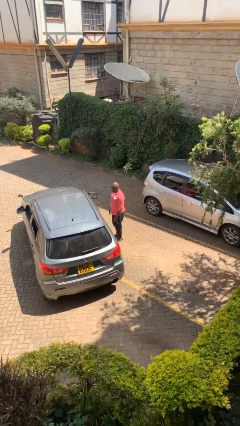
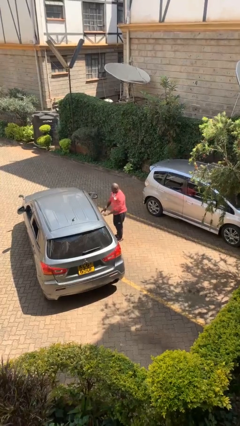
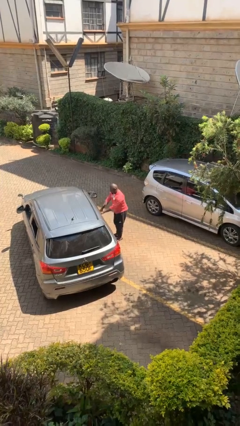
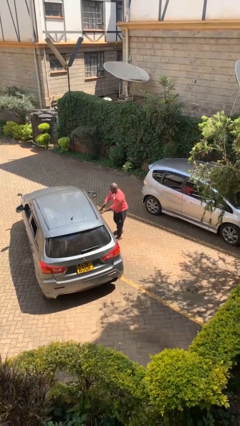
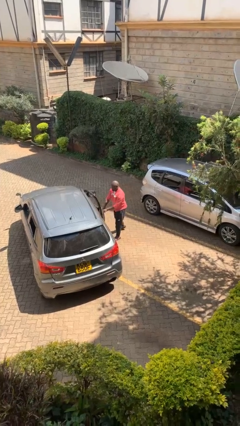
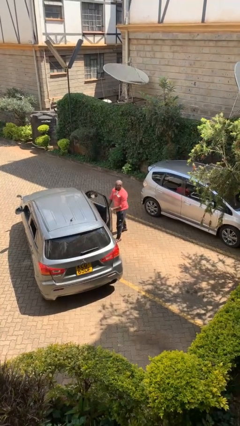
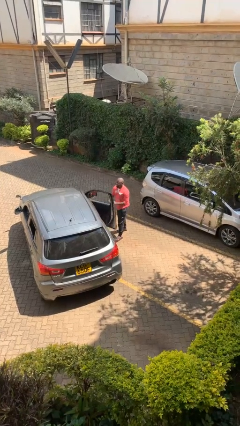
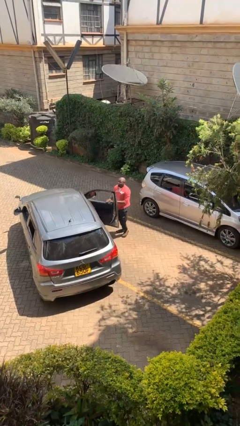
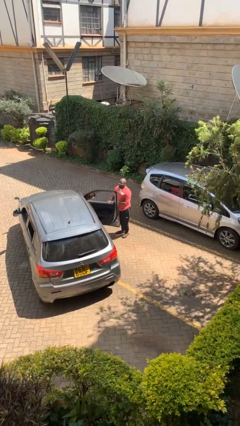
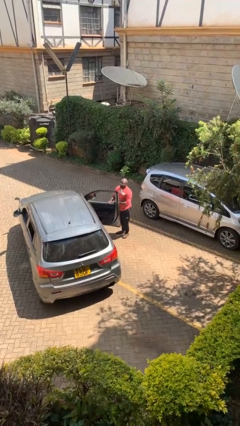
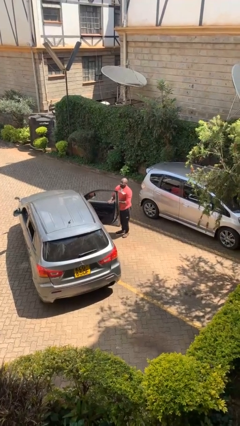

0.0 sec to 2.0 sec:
person opens car door

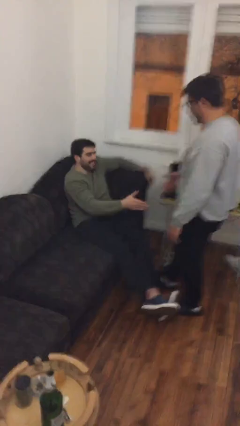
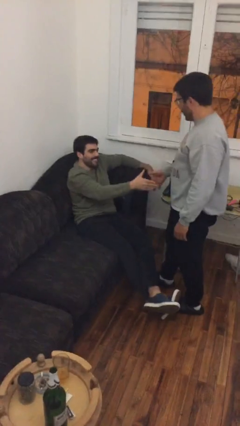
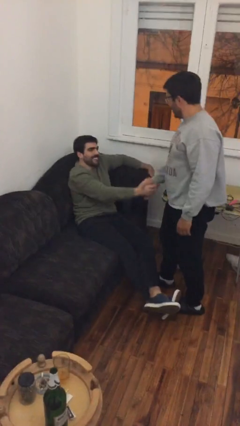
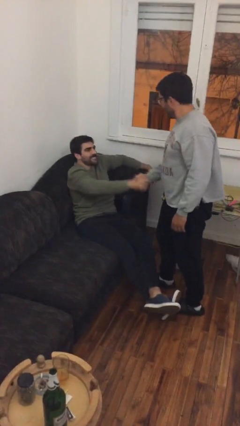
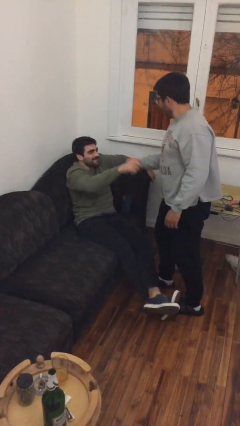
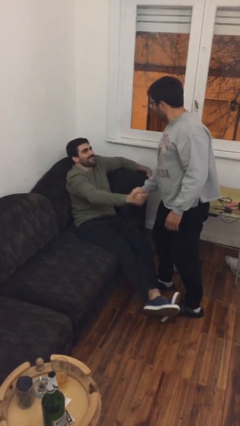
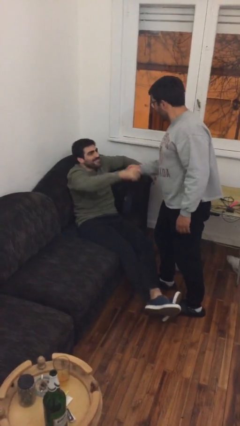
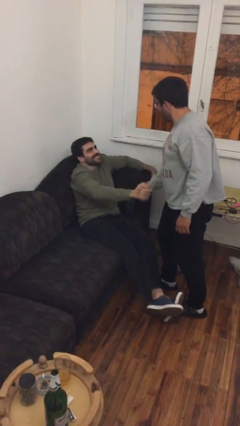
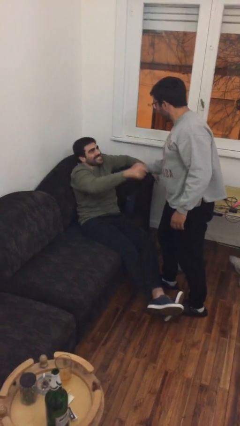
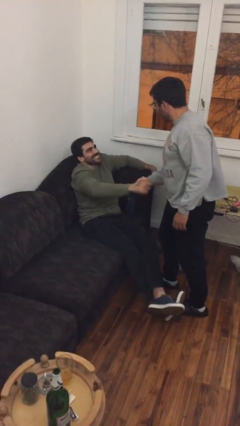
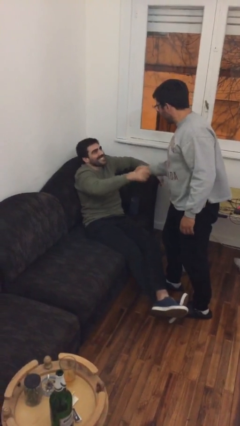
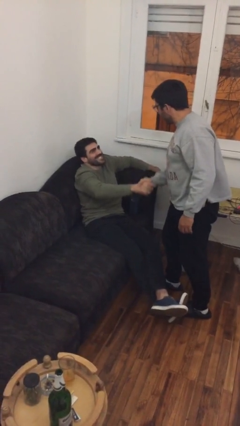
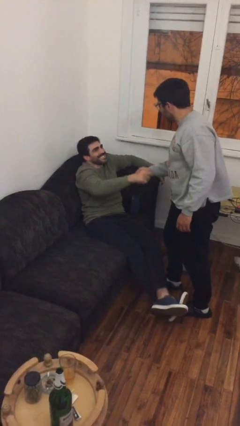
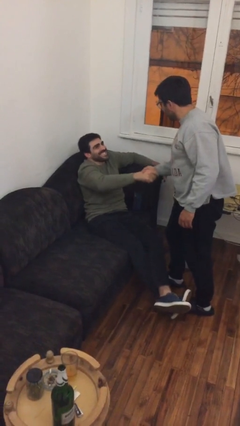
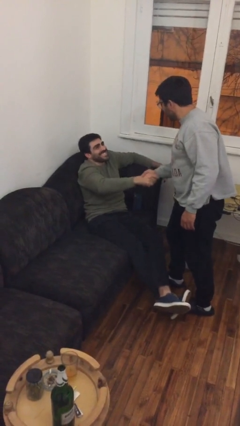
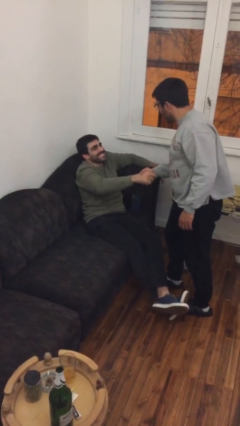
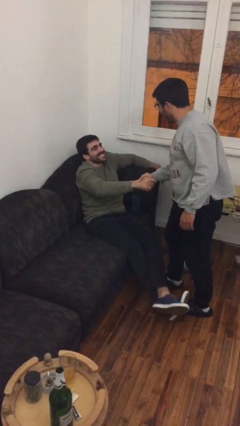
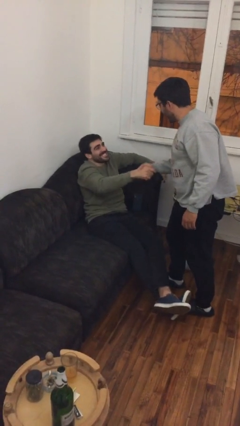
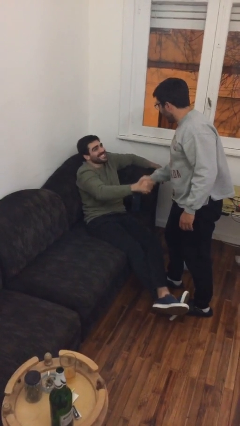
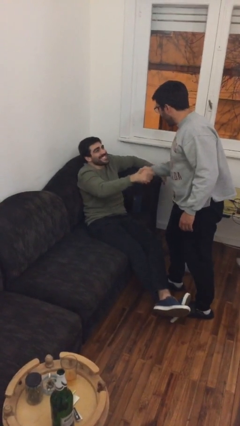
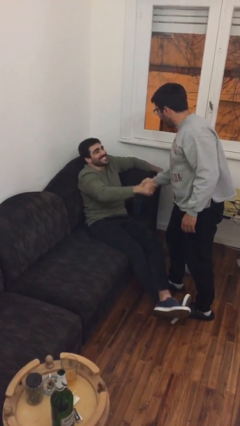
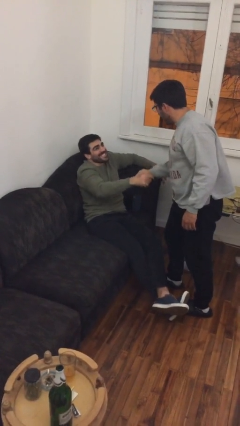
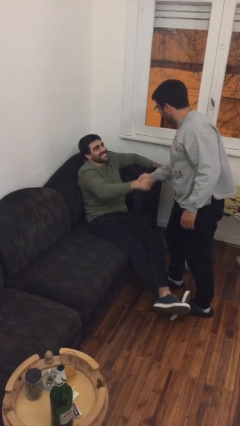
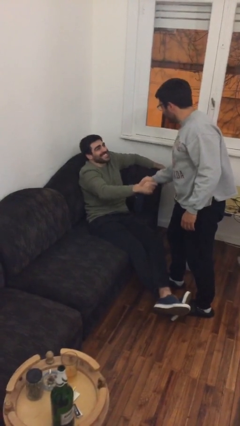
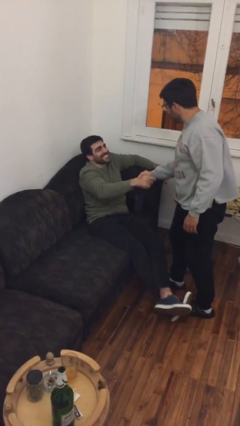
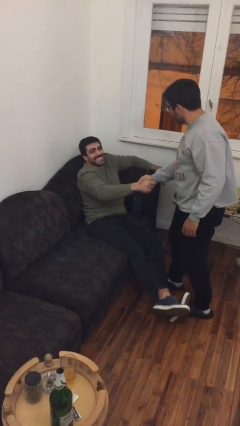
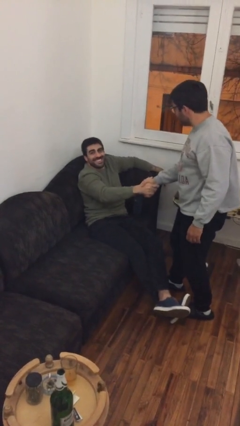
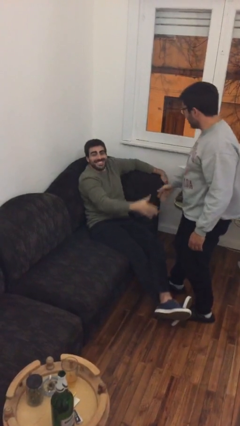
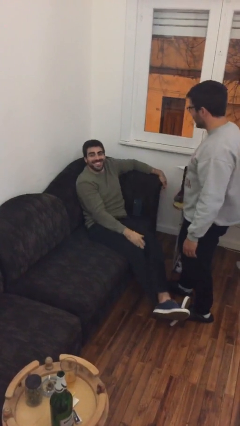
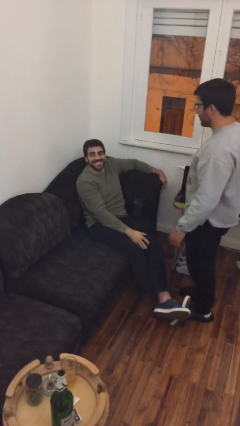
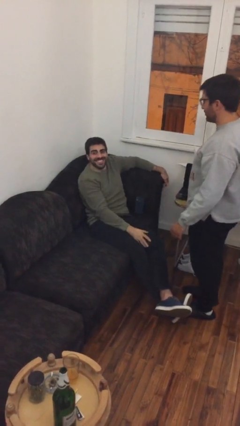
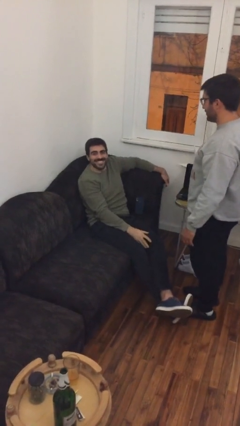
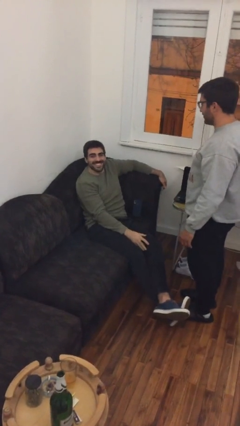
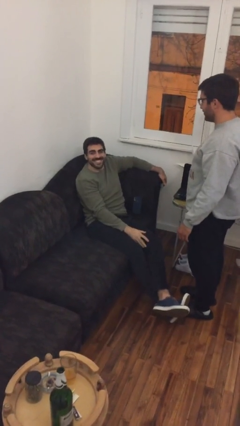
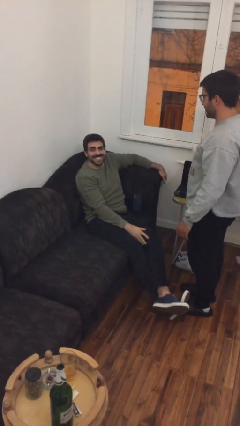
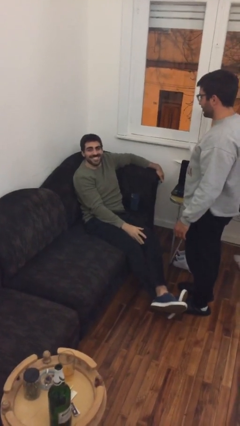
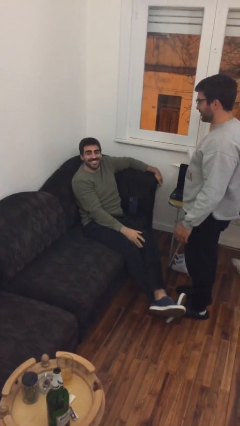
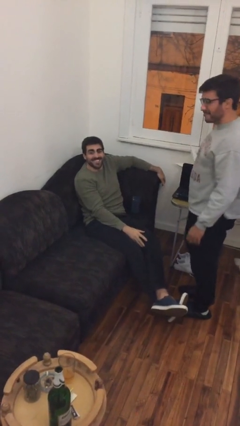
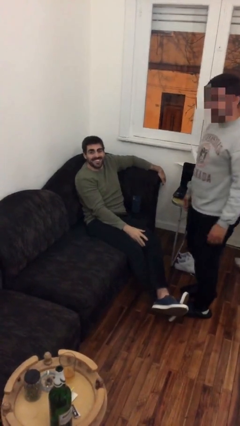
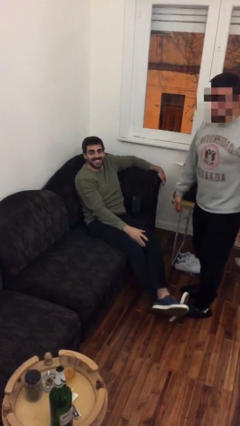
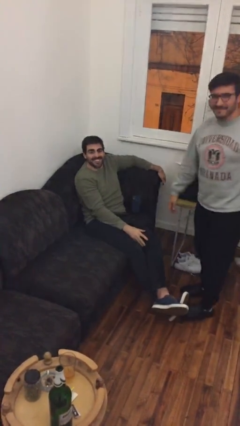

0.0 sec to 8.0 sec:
person shakes hand

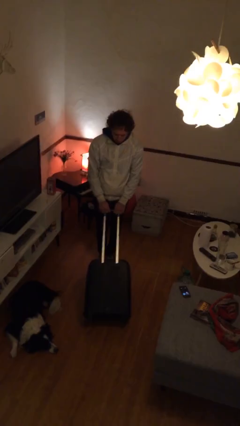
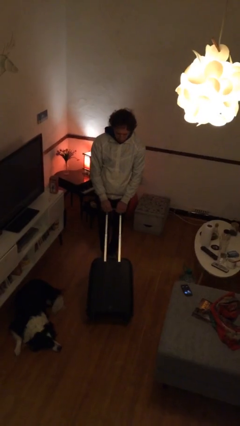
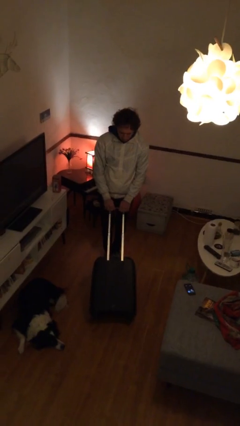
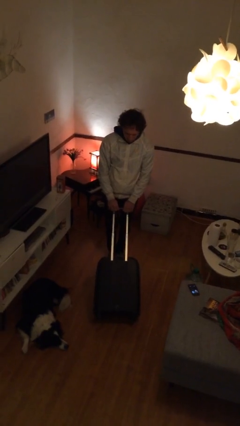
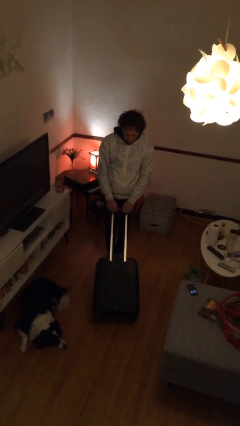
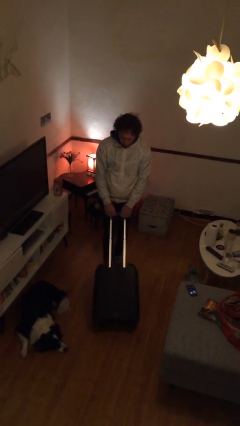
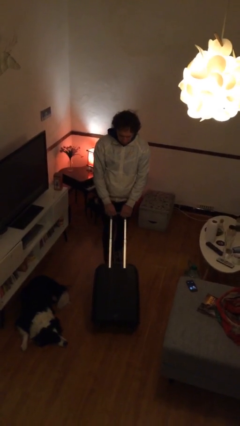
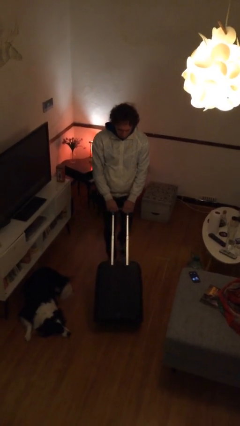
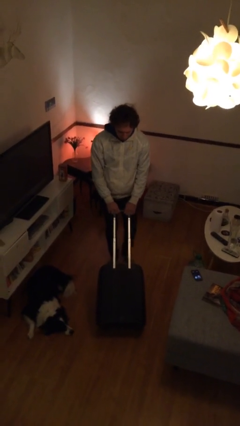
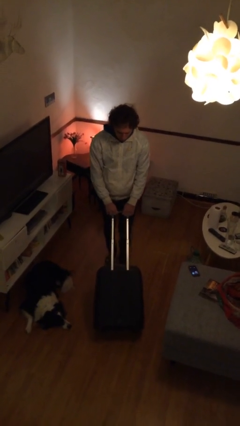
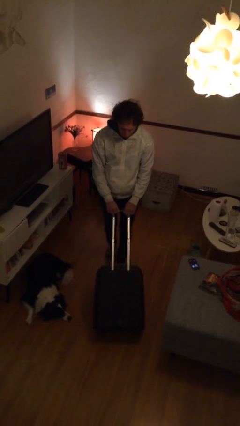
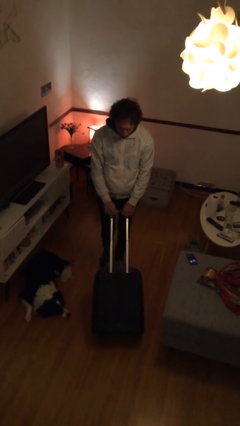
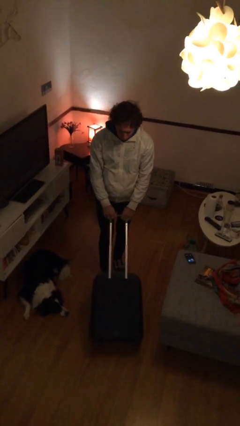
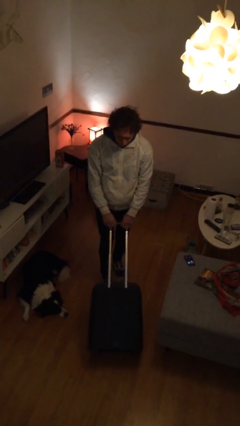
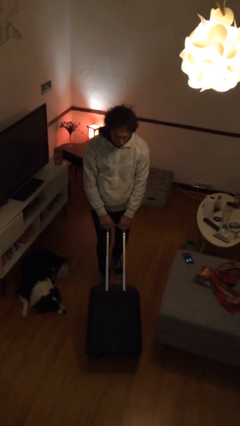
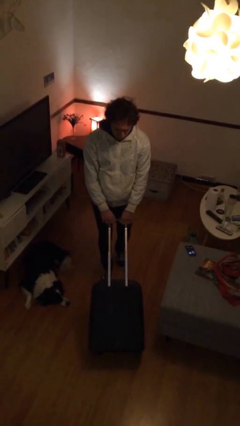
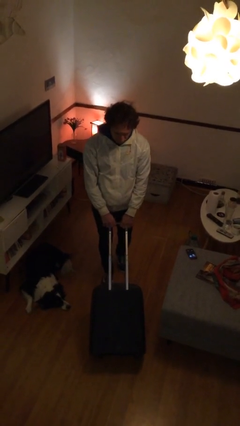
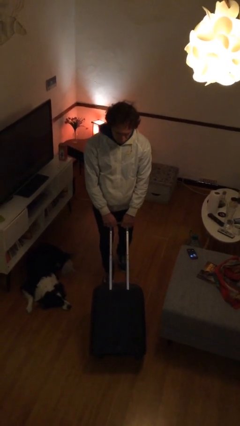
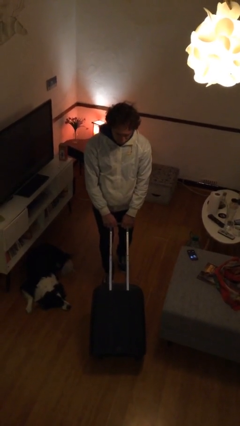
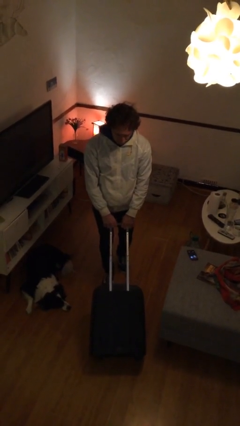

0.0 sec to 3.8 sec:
person pushes wheeled cart

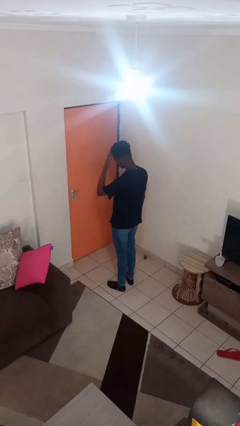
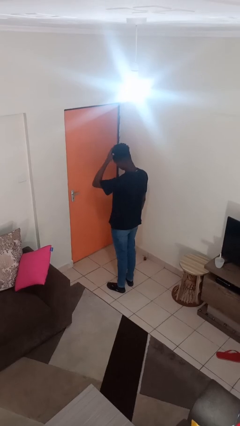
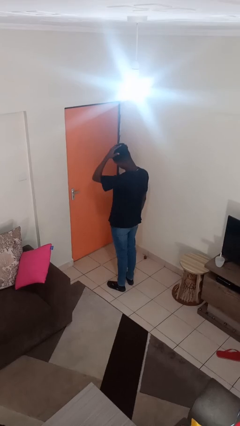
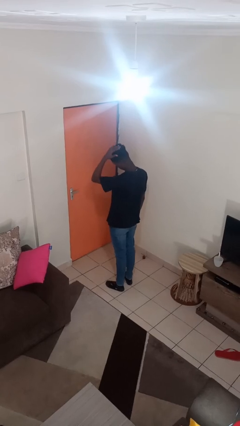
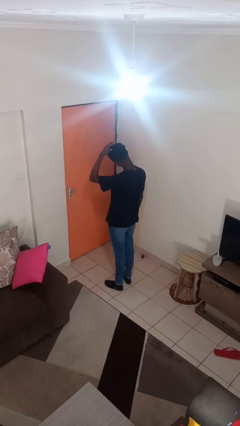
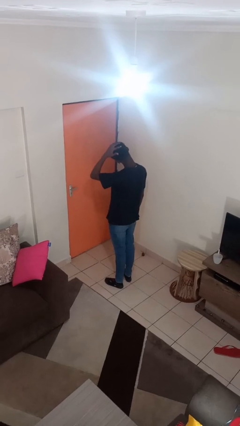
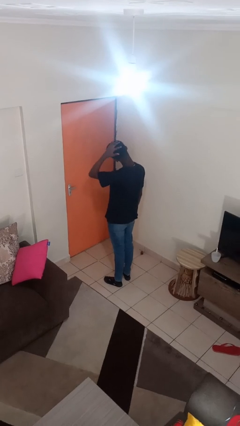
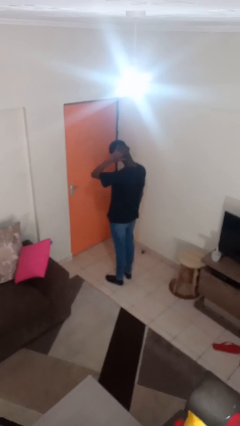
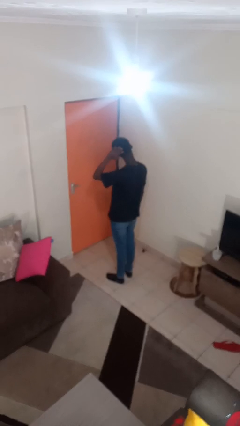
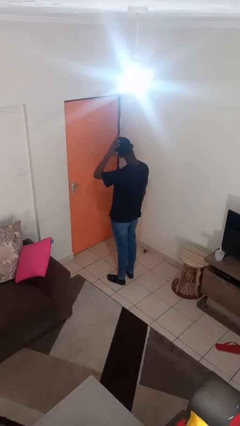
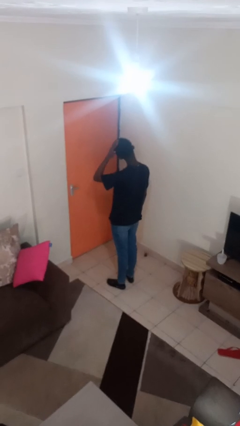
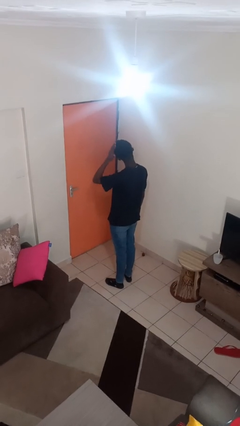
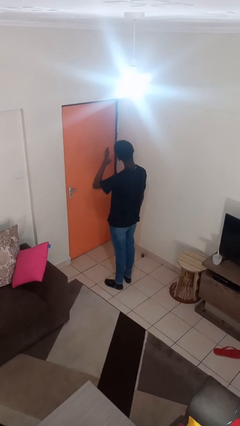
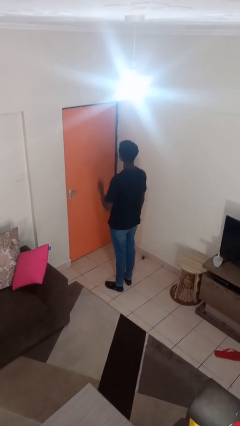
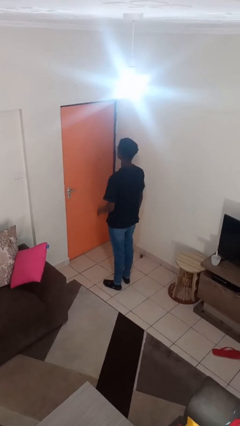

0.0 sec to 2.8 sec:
person strokes hair

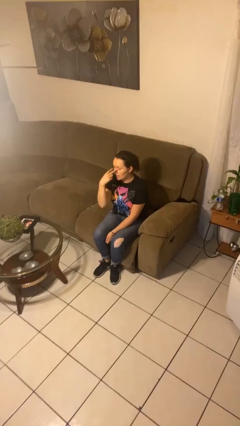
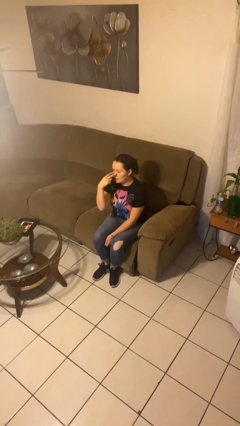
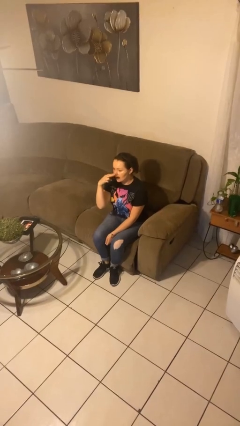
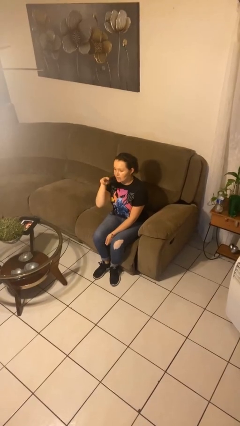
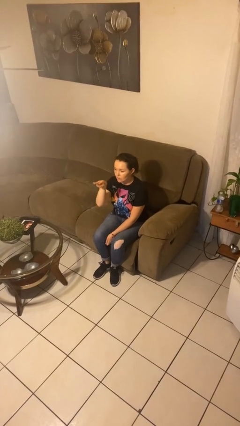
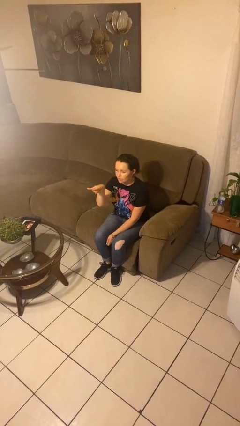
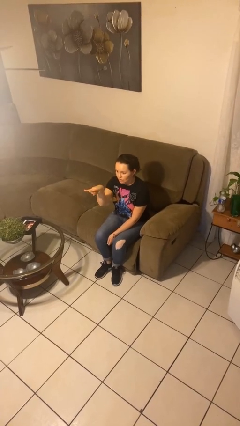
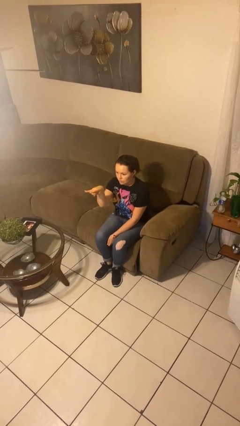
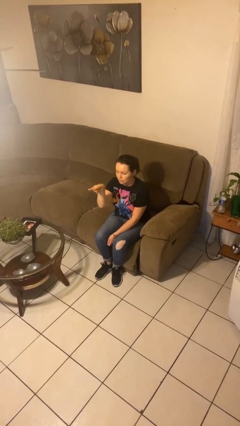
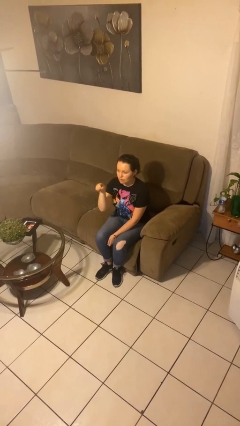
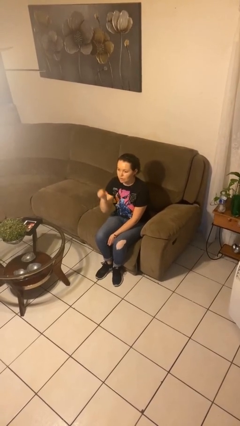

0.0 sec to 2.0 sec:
person gestures watch closely
